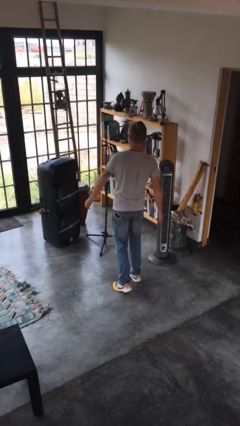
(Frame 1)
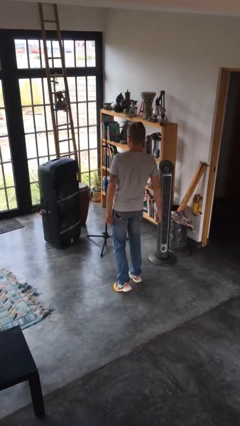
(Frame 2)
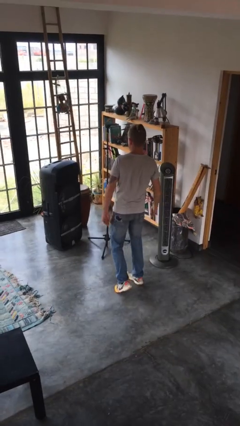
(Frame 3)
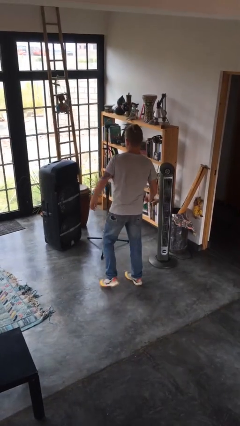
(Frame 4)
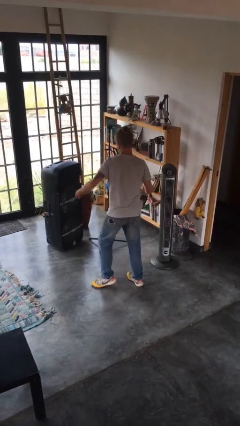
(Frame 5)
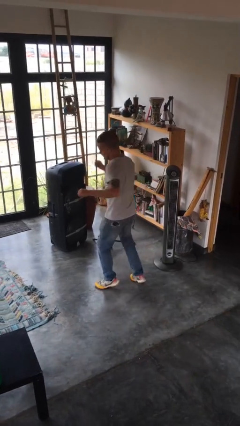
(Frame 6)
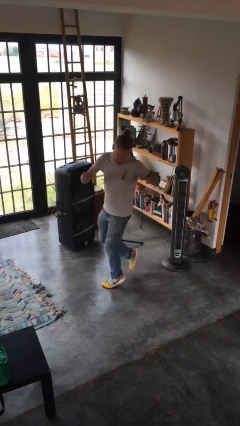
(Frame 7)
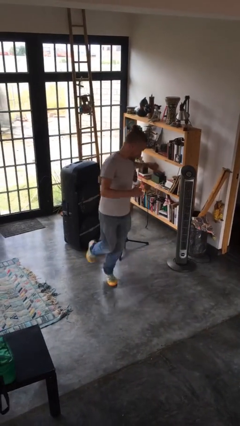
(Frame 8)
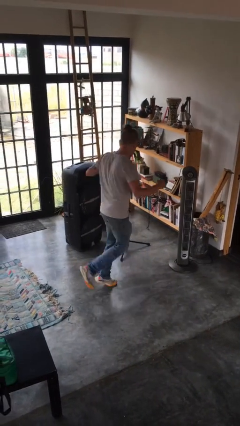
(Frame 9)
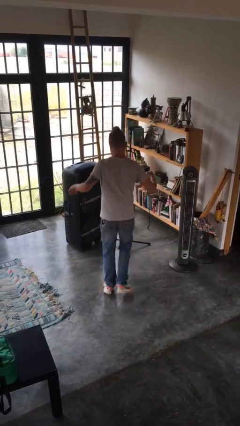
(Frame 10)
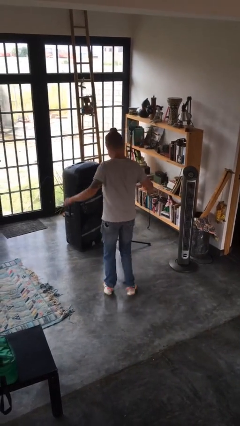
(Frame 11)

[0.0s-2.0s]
person twirls

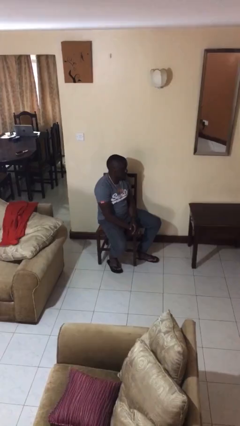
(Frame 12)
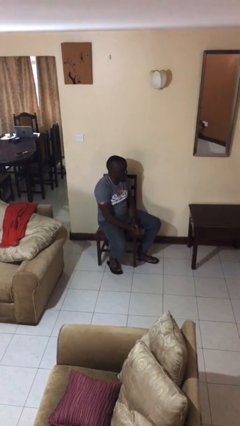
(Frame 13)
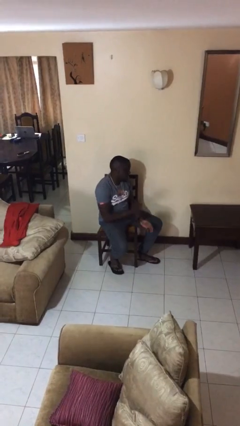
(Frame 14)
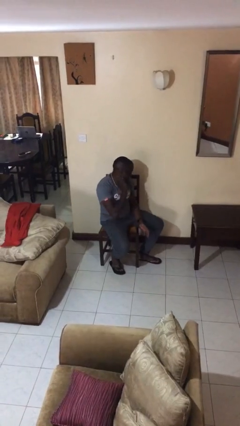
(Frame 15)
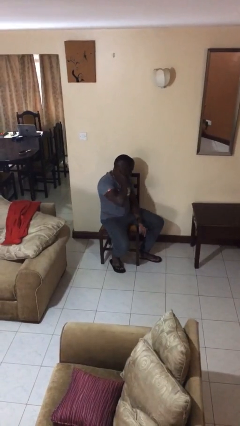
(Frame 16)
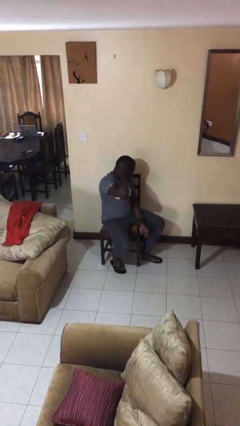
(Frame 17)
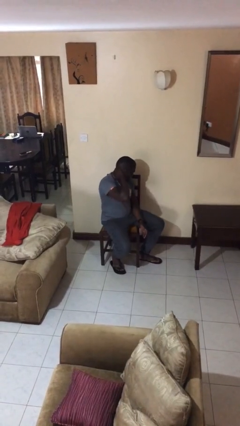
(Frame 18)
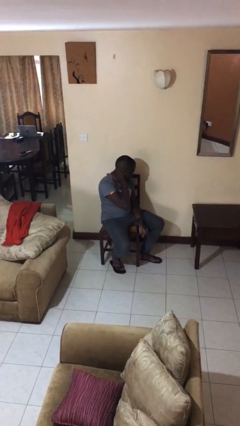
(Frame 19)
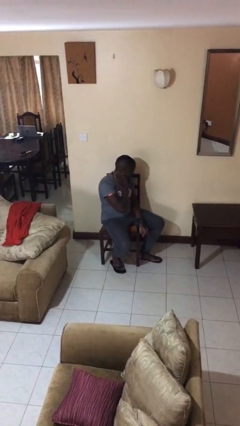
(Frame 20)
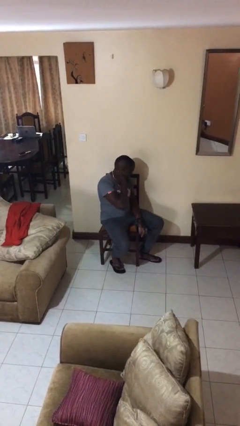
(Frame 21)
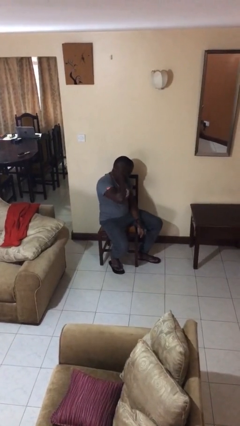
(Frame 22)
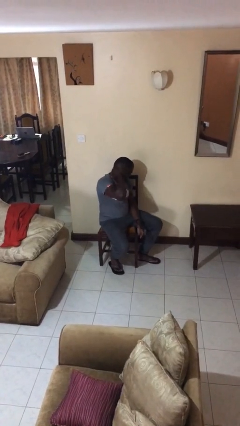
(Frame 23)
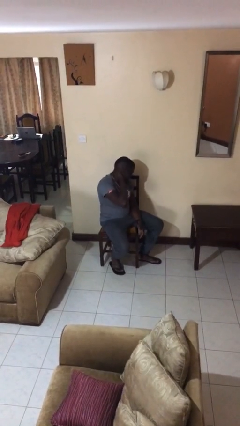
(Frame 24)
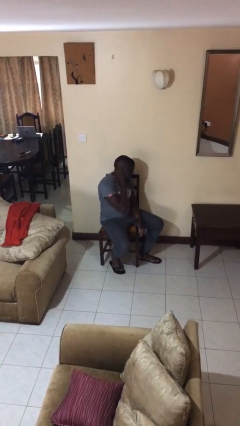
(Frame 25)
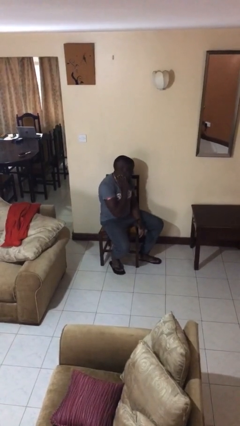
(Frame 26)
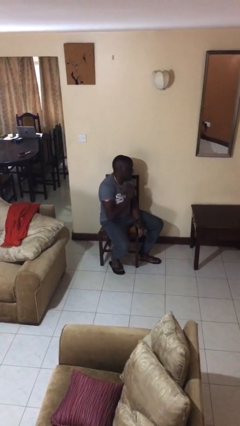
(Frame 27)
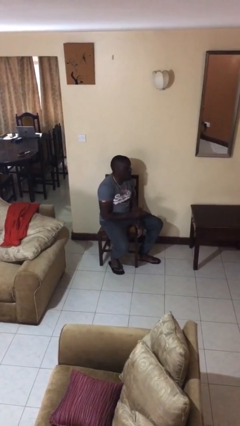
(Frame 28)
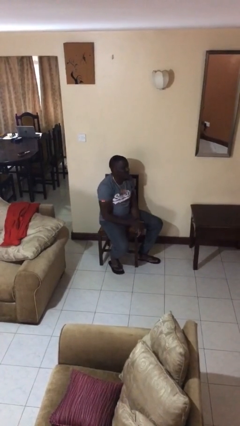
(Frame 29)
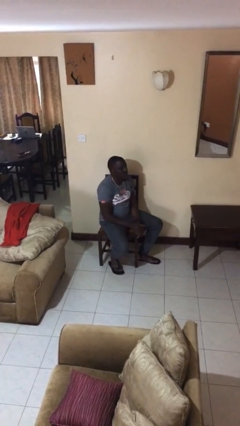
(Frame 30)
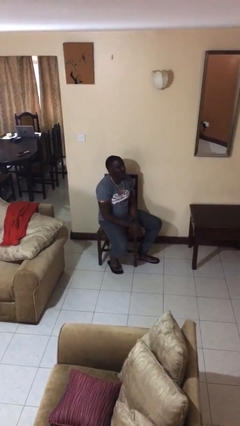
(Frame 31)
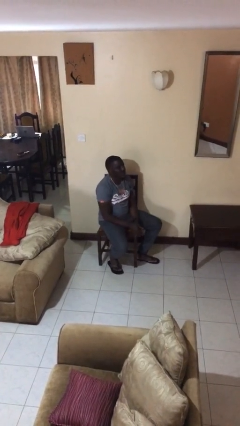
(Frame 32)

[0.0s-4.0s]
person rubs neck

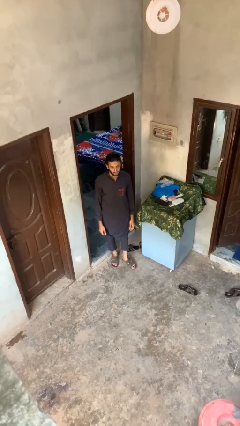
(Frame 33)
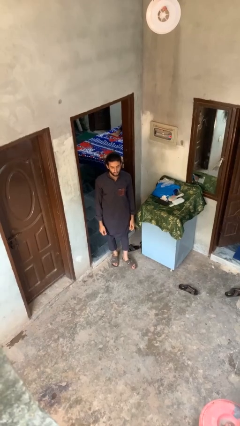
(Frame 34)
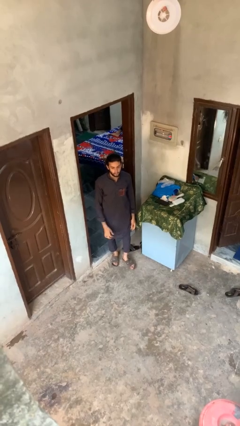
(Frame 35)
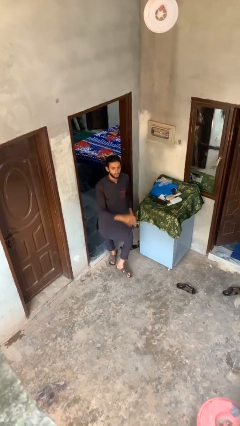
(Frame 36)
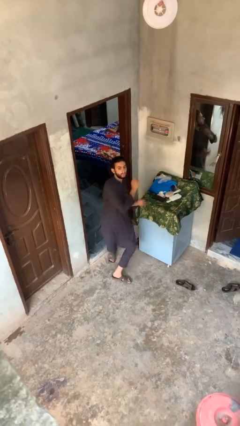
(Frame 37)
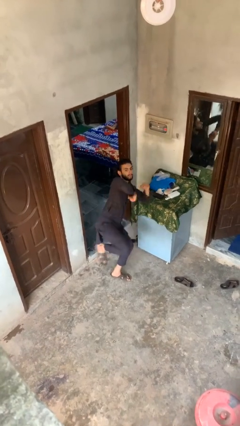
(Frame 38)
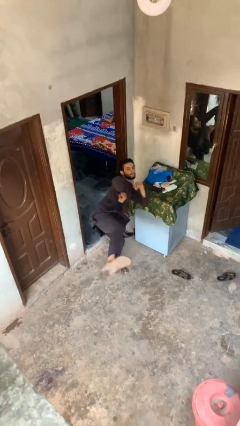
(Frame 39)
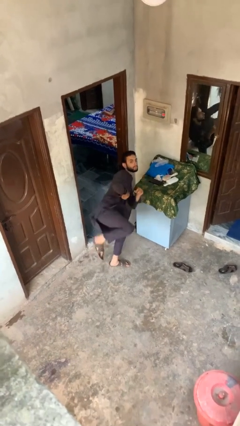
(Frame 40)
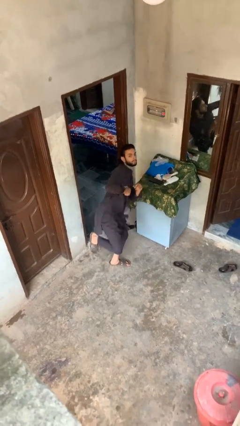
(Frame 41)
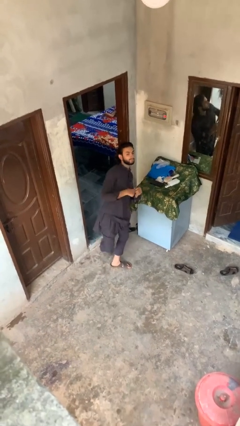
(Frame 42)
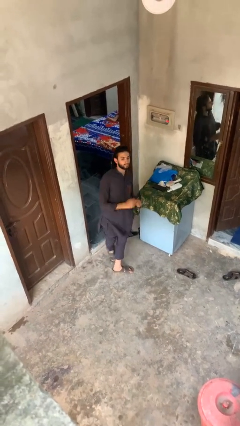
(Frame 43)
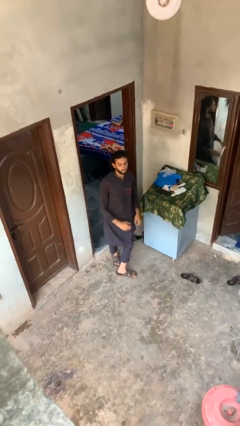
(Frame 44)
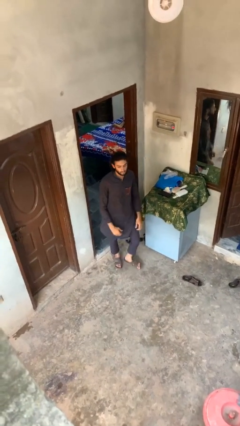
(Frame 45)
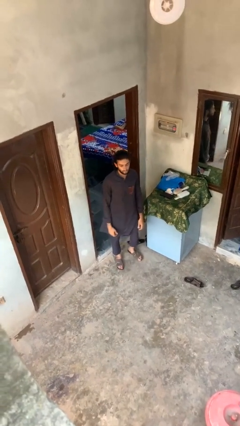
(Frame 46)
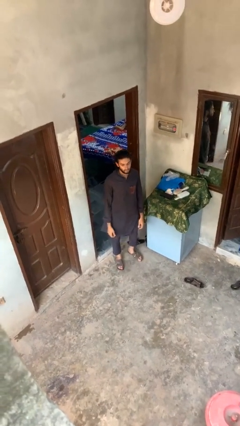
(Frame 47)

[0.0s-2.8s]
person karate kicks

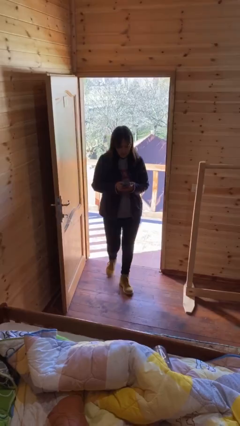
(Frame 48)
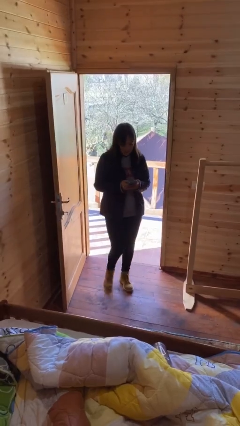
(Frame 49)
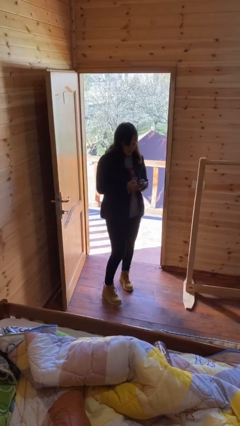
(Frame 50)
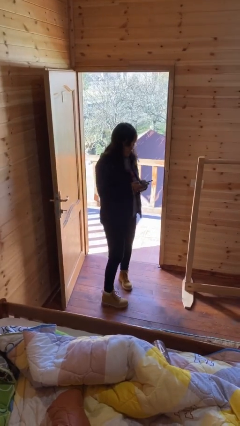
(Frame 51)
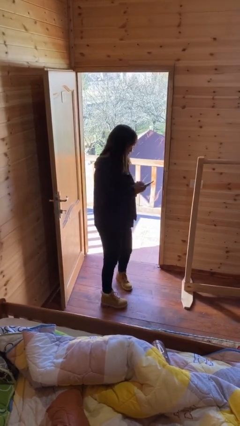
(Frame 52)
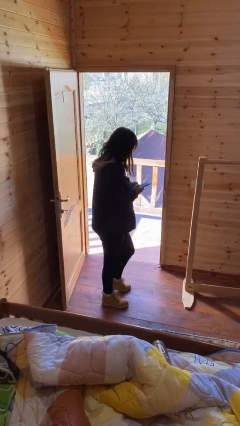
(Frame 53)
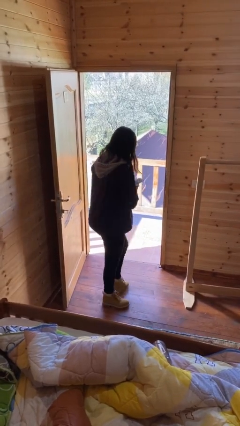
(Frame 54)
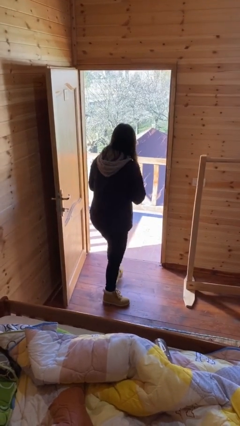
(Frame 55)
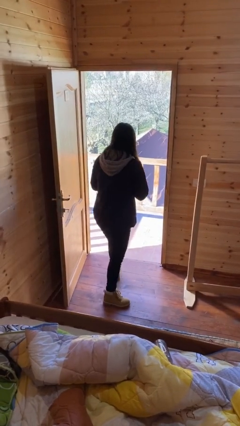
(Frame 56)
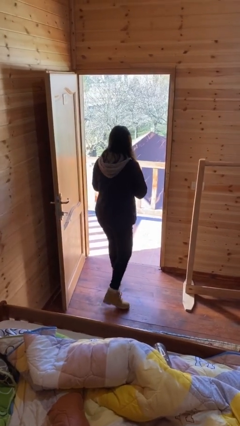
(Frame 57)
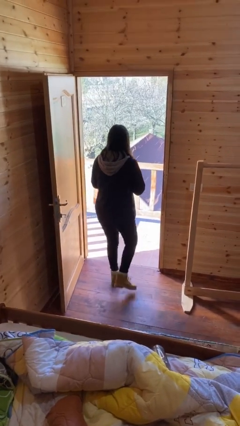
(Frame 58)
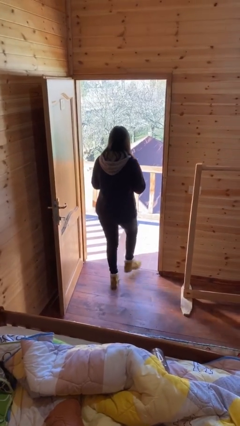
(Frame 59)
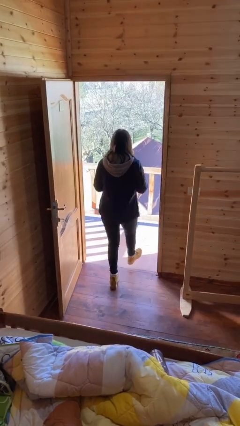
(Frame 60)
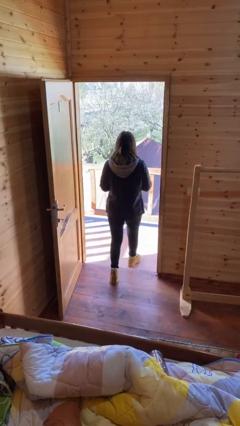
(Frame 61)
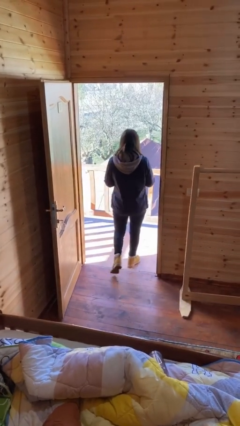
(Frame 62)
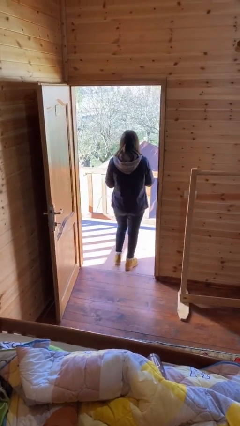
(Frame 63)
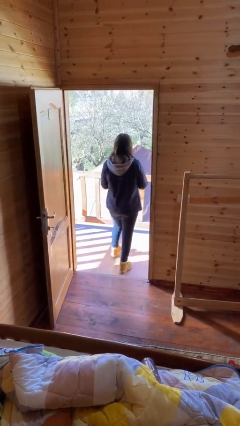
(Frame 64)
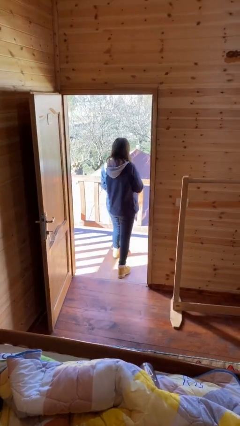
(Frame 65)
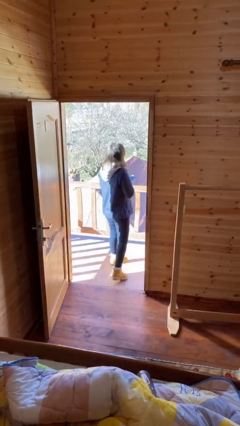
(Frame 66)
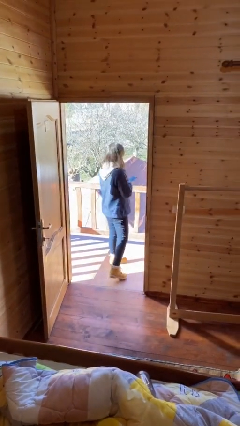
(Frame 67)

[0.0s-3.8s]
person exits scene through structure

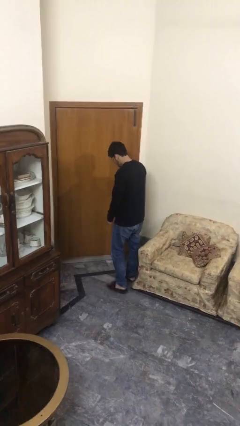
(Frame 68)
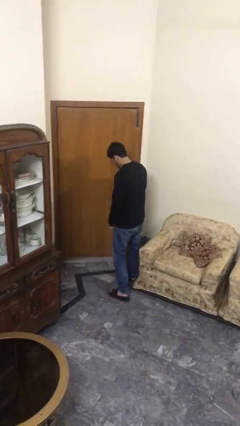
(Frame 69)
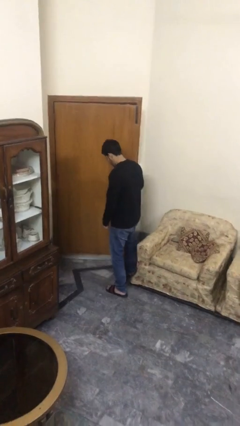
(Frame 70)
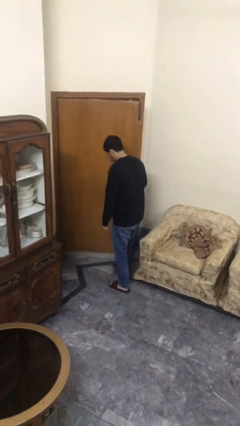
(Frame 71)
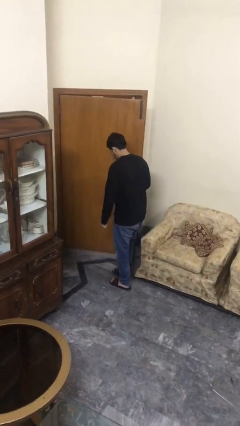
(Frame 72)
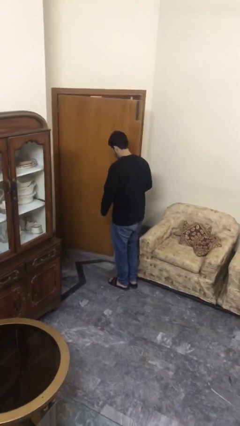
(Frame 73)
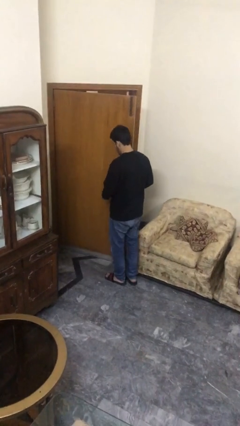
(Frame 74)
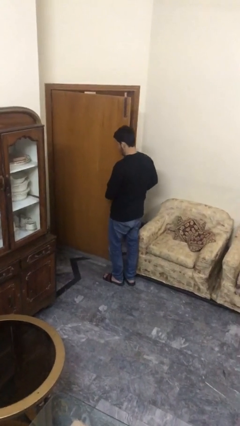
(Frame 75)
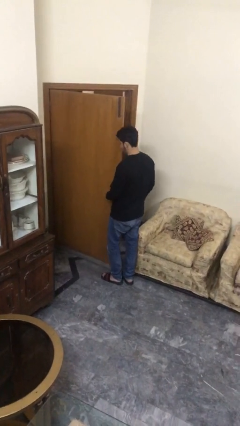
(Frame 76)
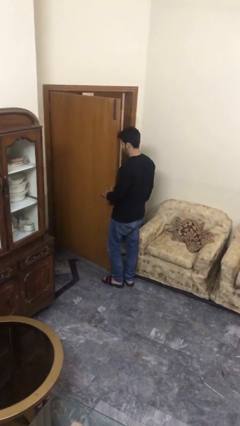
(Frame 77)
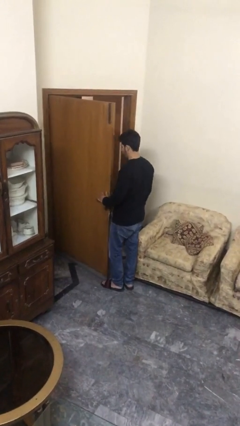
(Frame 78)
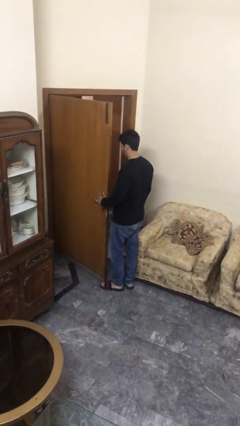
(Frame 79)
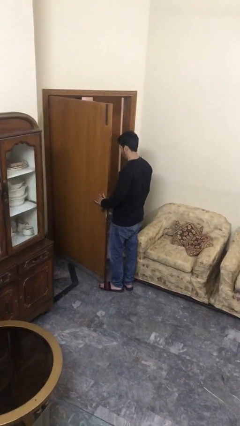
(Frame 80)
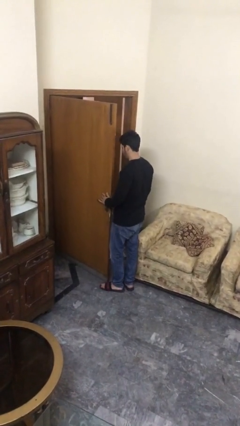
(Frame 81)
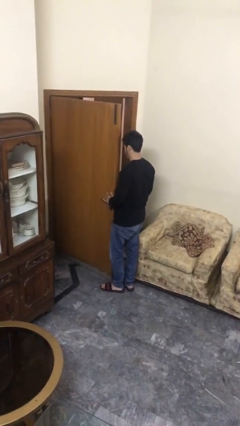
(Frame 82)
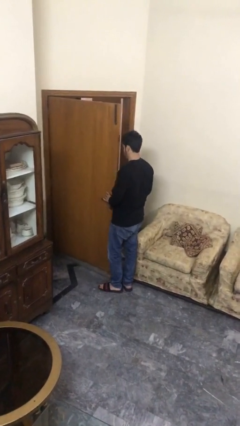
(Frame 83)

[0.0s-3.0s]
person opens facility door

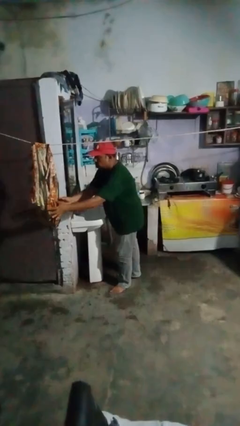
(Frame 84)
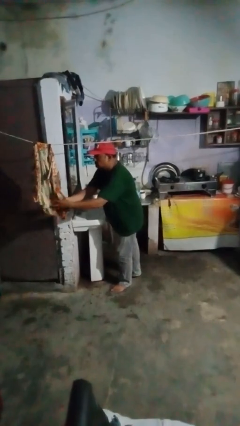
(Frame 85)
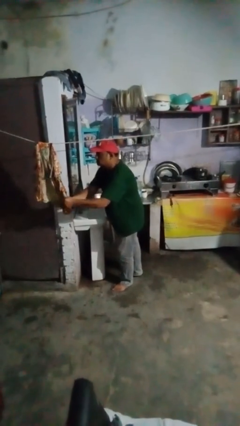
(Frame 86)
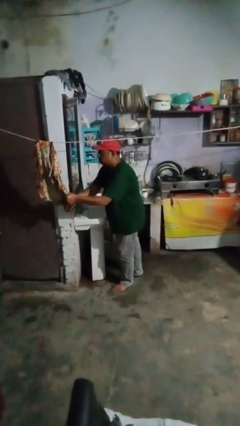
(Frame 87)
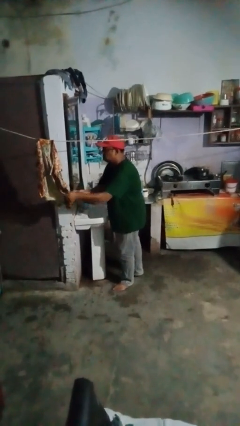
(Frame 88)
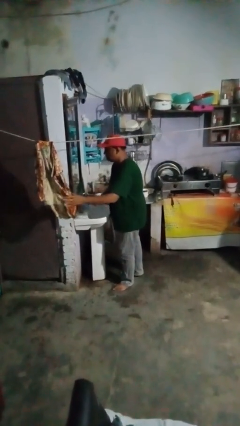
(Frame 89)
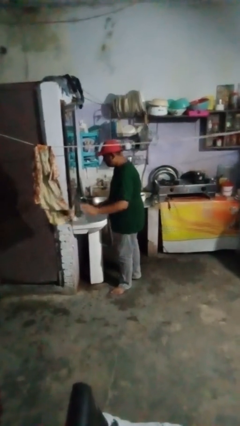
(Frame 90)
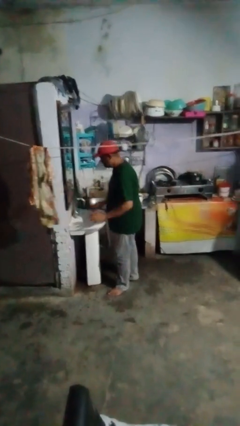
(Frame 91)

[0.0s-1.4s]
person dries hands with towel
